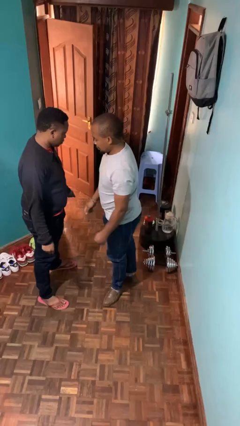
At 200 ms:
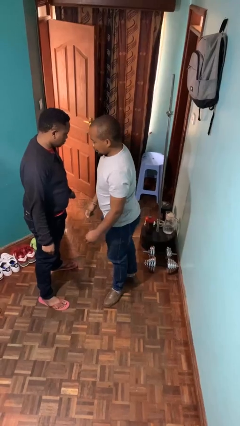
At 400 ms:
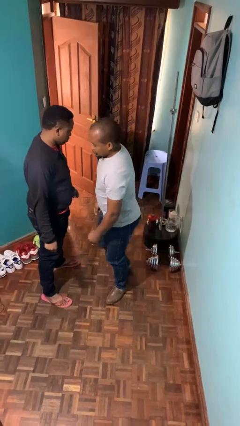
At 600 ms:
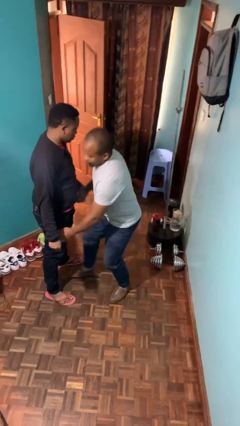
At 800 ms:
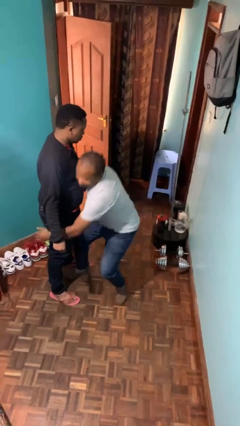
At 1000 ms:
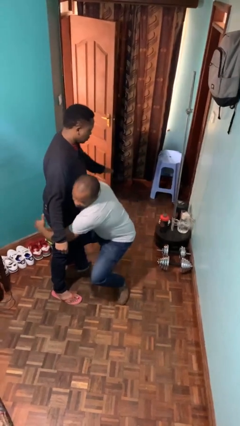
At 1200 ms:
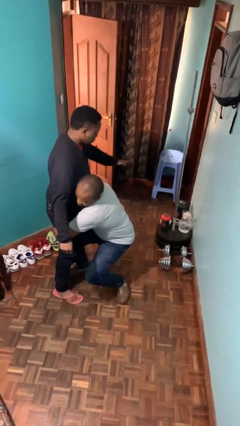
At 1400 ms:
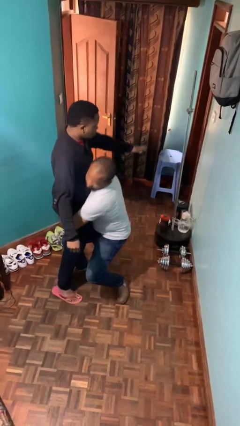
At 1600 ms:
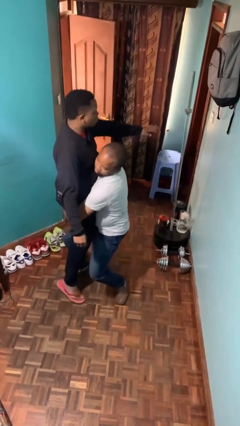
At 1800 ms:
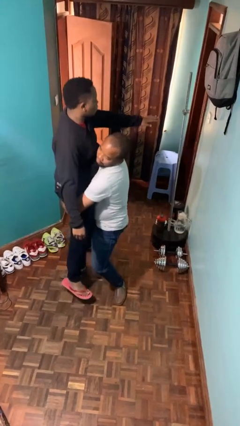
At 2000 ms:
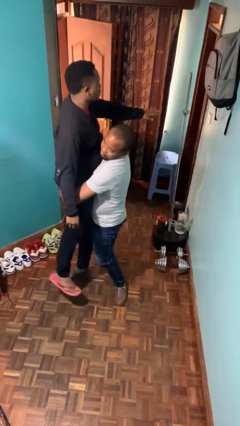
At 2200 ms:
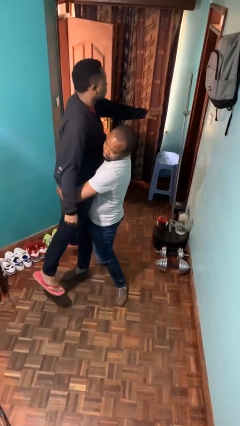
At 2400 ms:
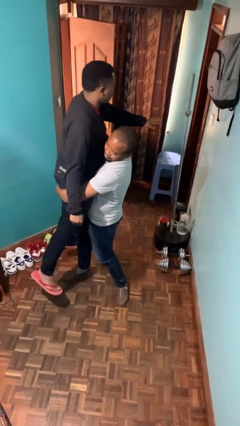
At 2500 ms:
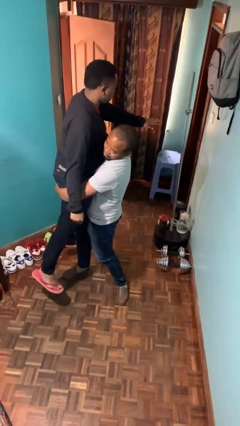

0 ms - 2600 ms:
person picks up person

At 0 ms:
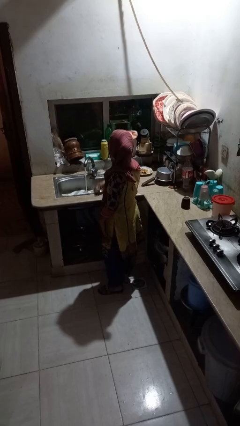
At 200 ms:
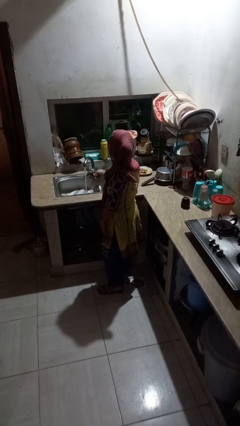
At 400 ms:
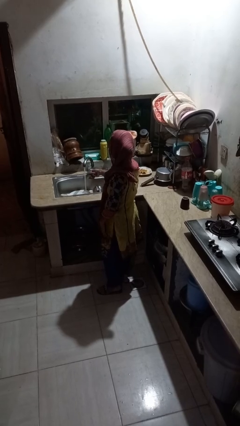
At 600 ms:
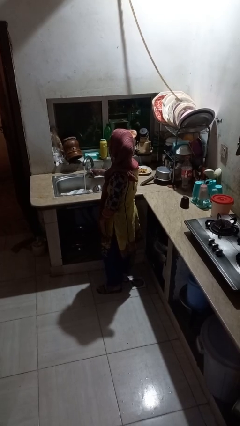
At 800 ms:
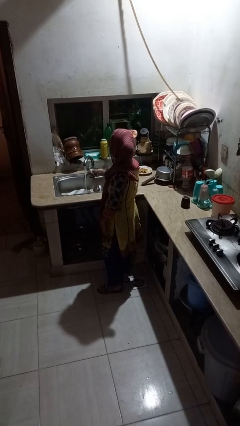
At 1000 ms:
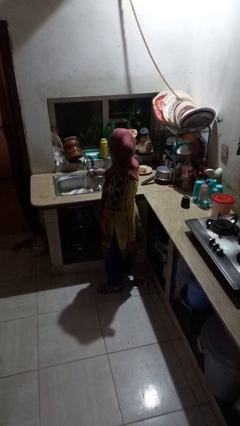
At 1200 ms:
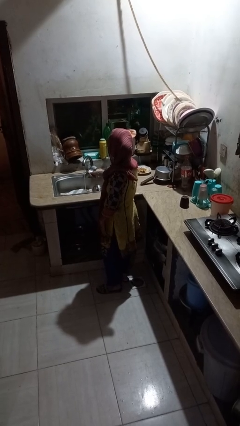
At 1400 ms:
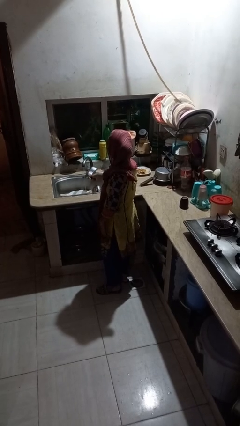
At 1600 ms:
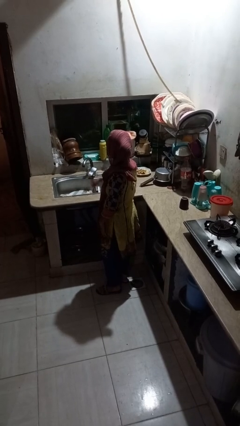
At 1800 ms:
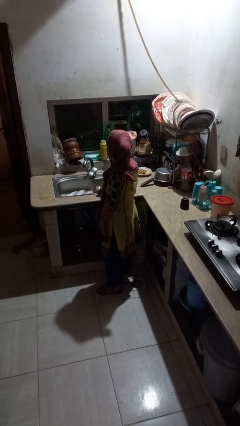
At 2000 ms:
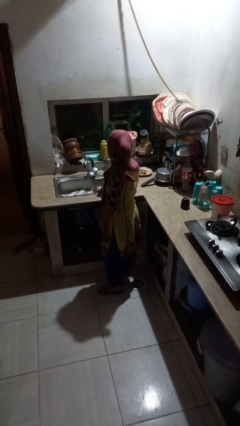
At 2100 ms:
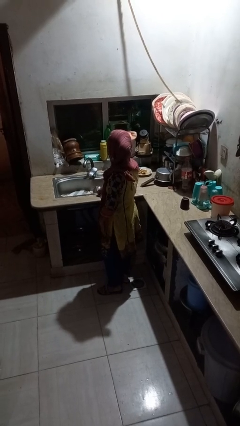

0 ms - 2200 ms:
person turns off faucet

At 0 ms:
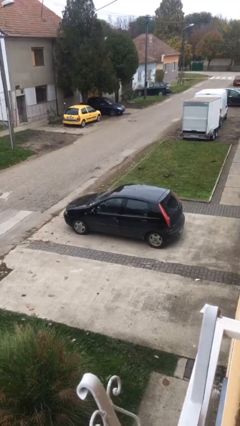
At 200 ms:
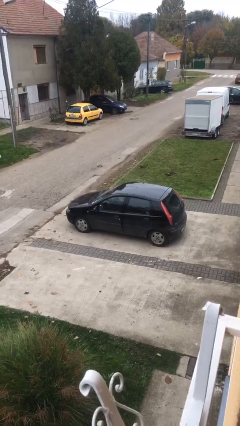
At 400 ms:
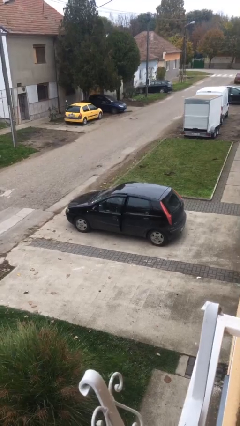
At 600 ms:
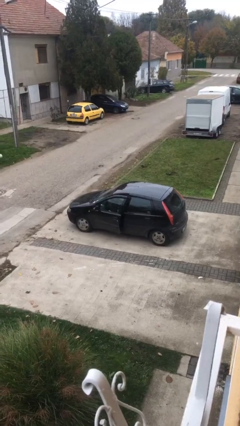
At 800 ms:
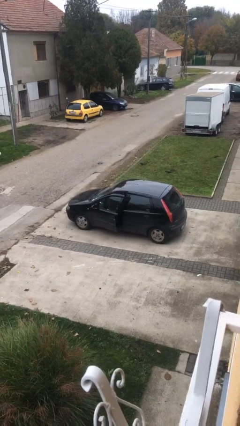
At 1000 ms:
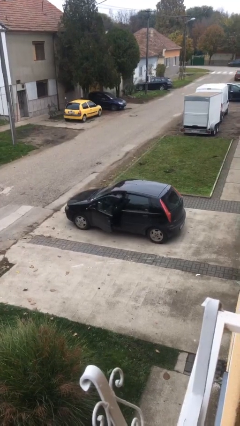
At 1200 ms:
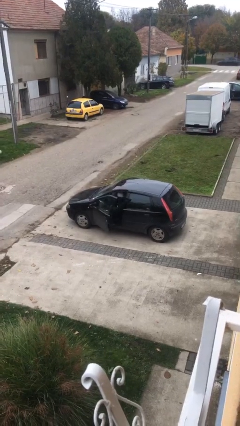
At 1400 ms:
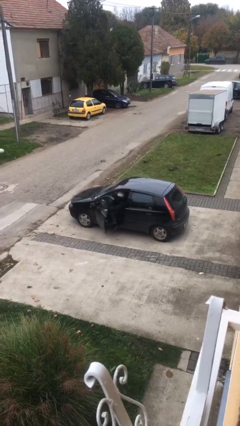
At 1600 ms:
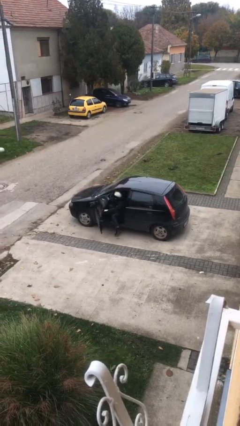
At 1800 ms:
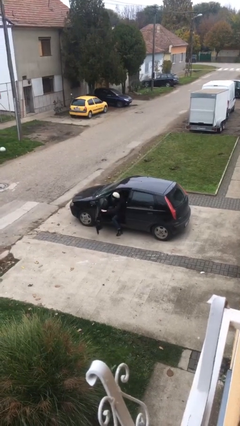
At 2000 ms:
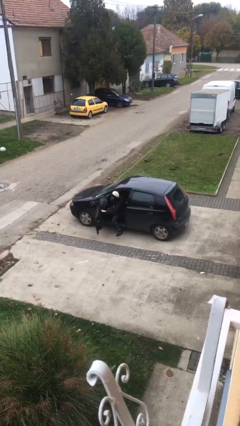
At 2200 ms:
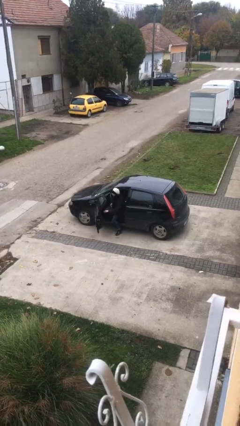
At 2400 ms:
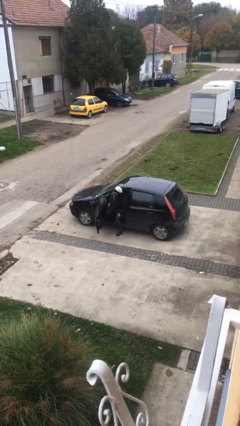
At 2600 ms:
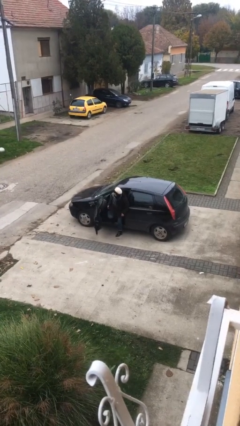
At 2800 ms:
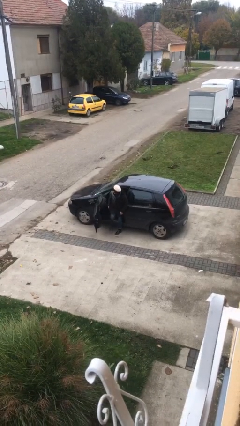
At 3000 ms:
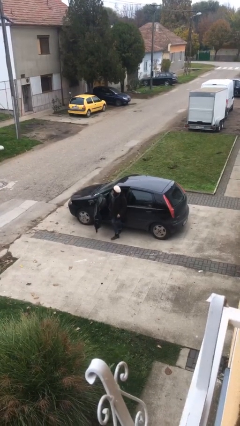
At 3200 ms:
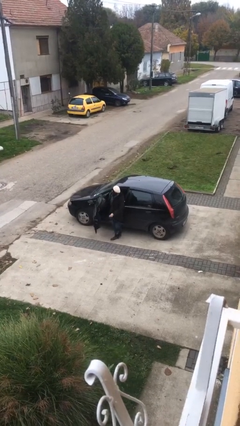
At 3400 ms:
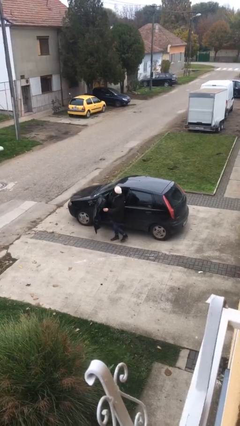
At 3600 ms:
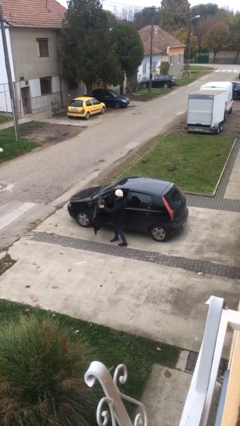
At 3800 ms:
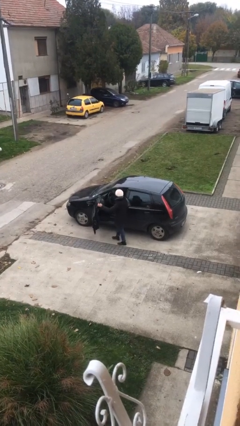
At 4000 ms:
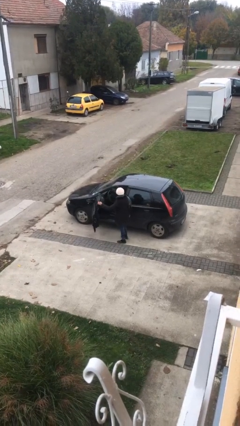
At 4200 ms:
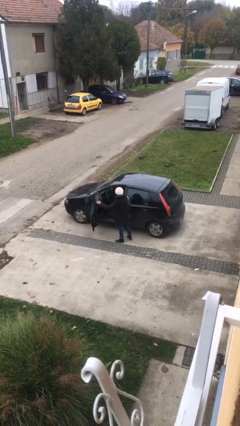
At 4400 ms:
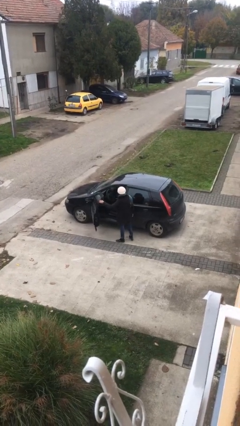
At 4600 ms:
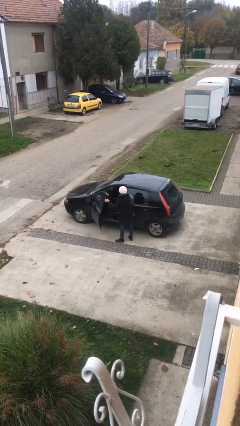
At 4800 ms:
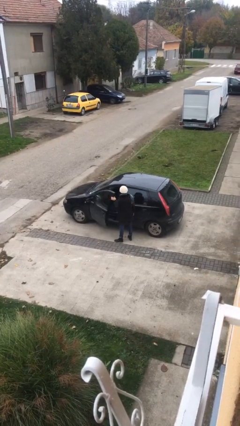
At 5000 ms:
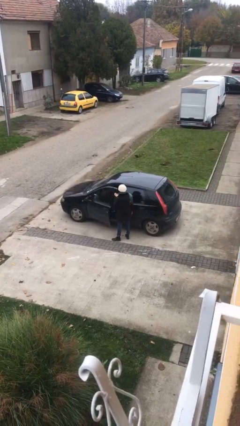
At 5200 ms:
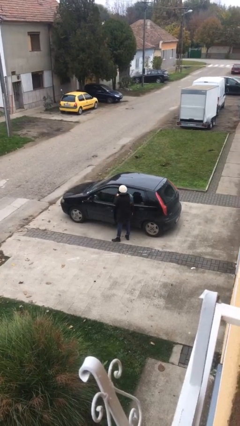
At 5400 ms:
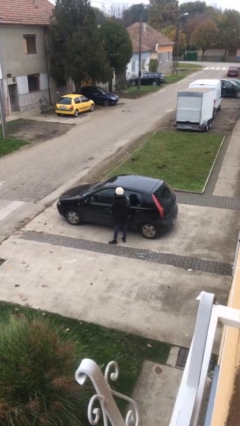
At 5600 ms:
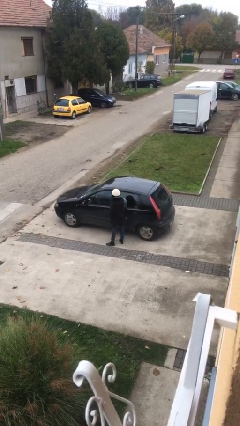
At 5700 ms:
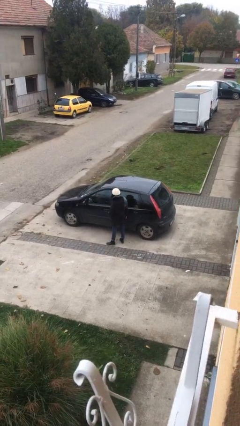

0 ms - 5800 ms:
person exits car

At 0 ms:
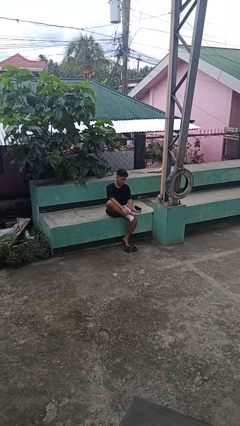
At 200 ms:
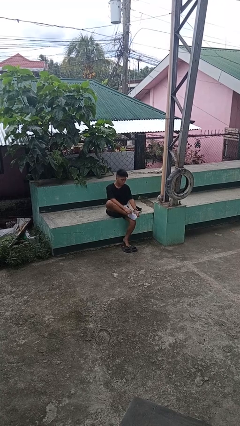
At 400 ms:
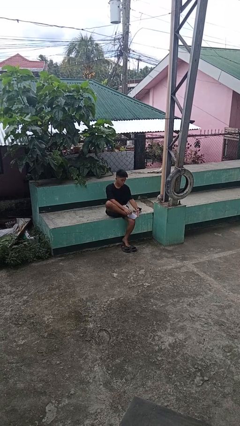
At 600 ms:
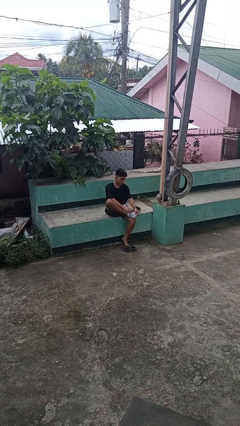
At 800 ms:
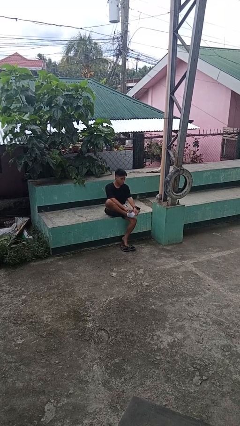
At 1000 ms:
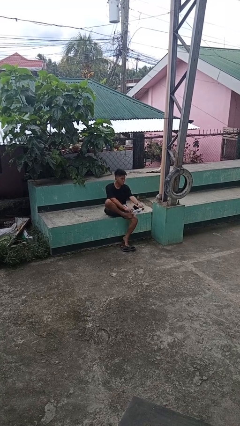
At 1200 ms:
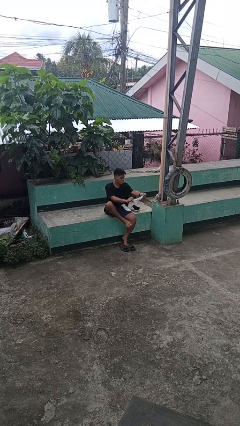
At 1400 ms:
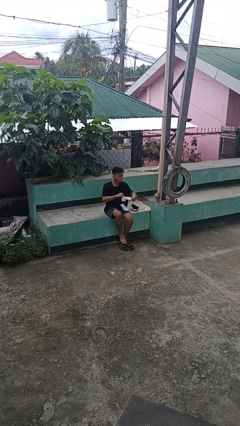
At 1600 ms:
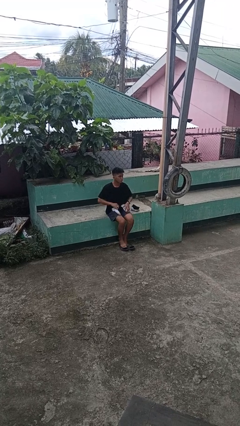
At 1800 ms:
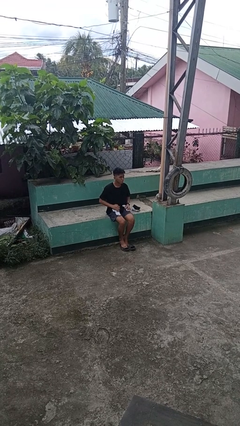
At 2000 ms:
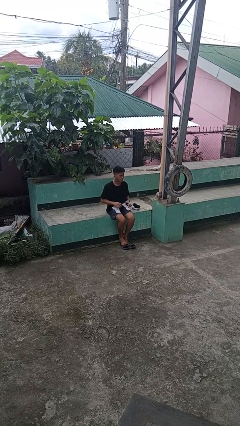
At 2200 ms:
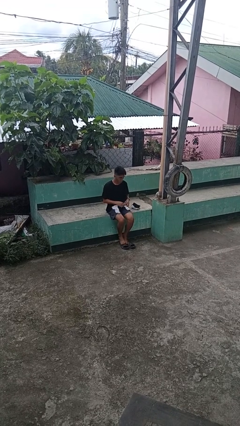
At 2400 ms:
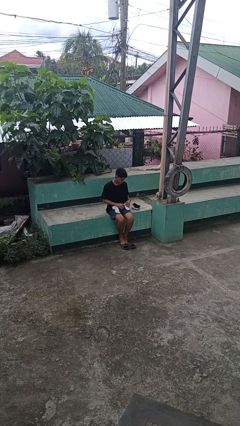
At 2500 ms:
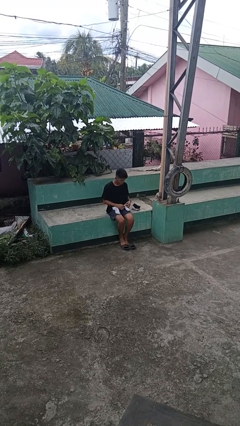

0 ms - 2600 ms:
person takes off socks

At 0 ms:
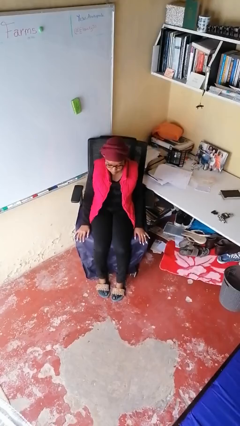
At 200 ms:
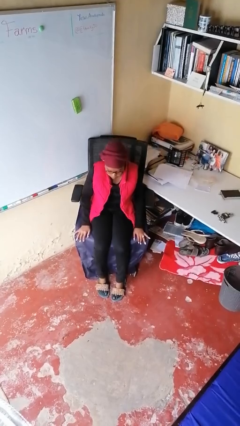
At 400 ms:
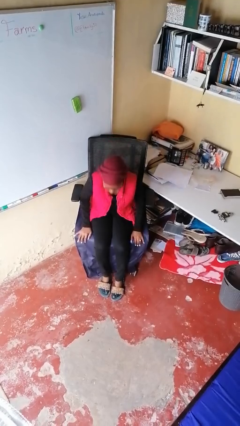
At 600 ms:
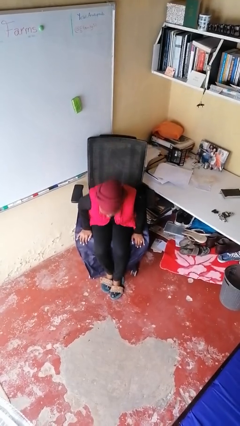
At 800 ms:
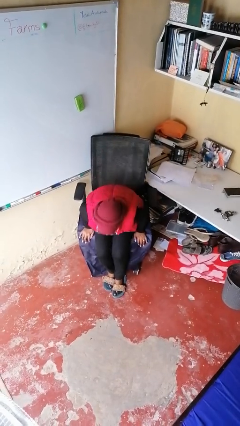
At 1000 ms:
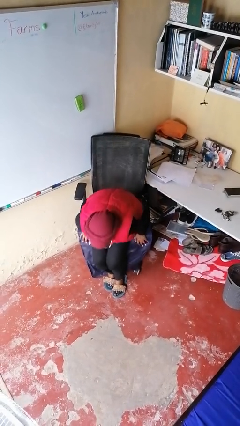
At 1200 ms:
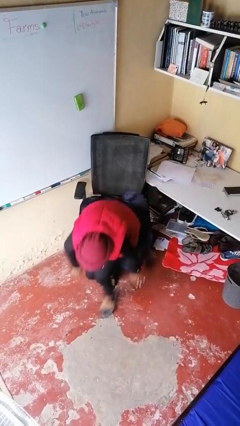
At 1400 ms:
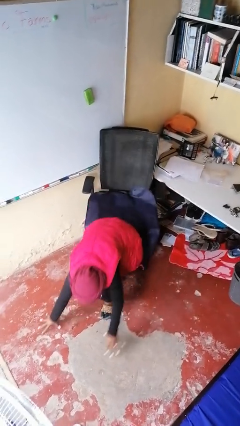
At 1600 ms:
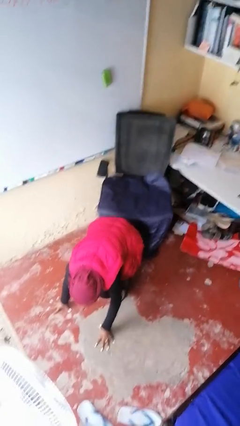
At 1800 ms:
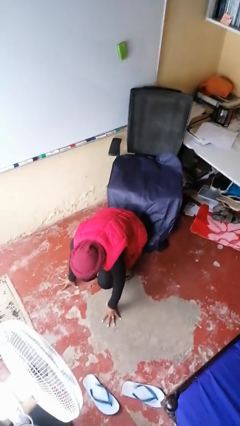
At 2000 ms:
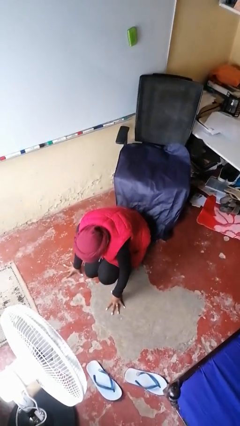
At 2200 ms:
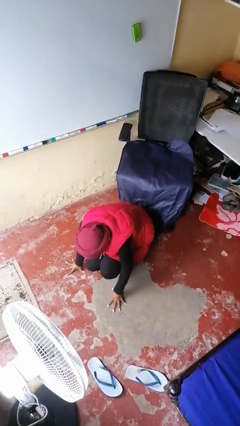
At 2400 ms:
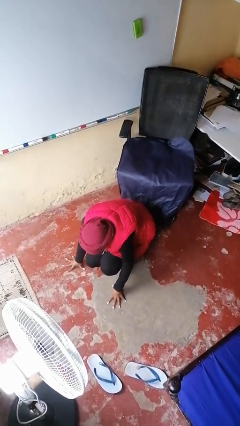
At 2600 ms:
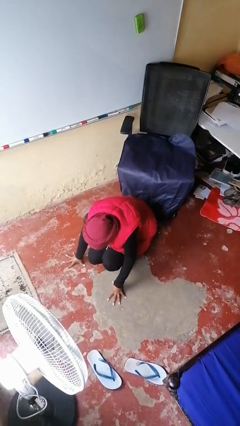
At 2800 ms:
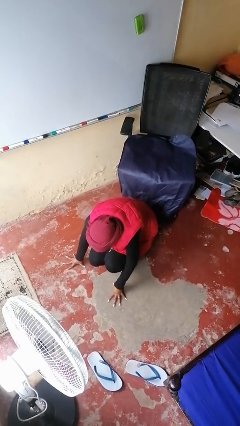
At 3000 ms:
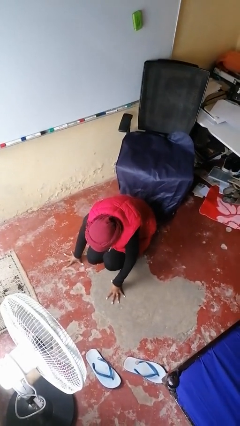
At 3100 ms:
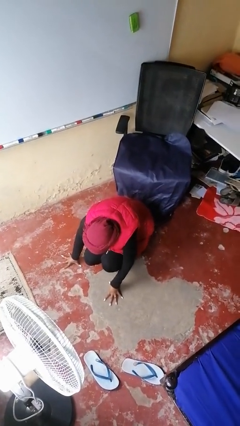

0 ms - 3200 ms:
person falls from chair

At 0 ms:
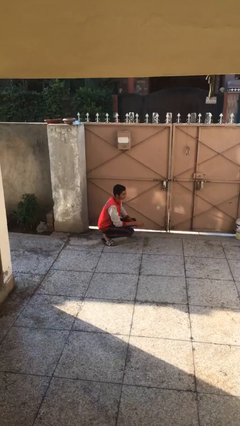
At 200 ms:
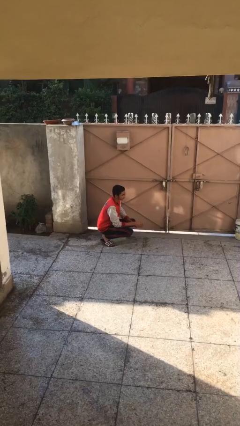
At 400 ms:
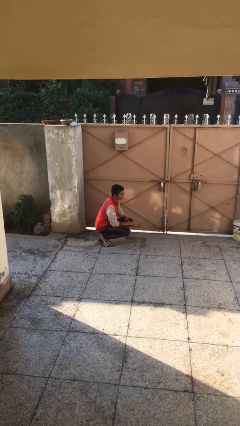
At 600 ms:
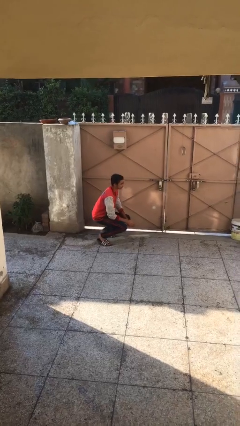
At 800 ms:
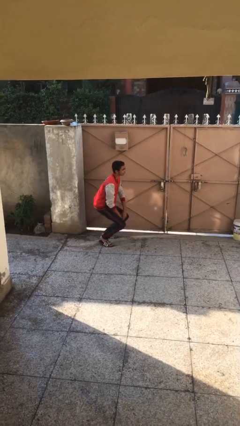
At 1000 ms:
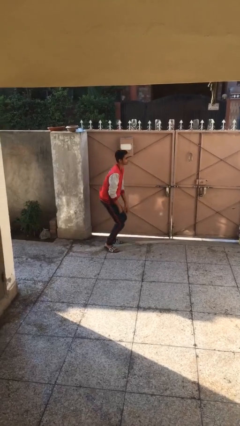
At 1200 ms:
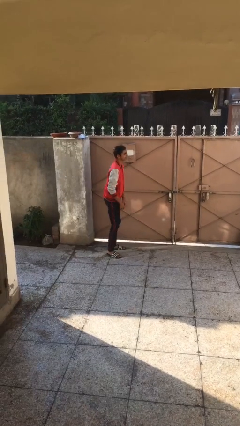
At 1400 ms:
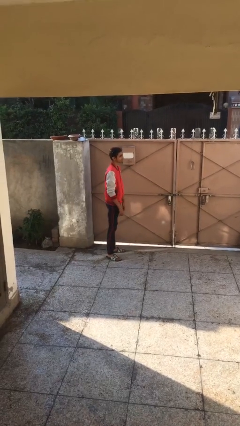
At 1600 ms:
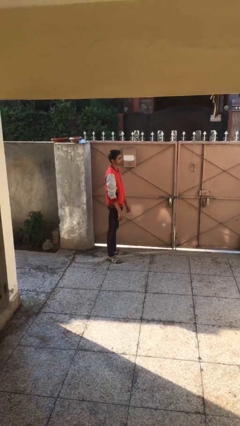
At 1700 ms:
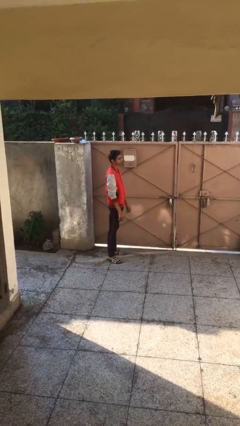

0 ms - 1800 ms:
person stands up
